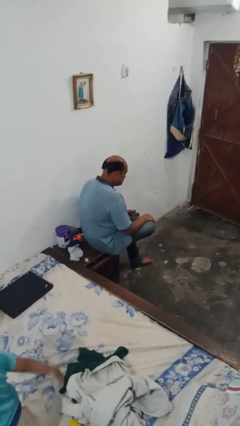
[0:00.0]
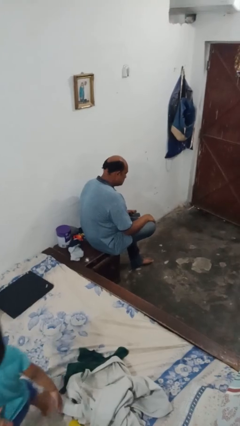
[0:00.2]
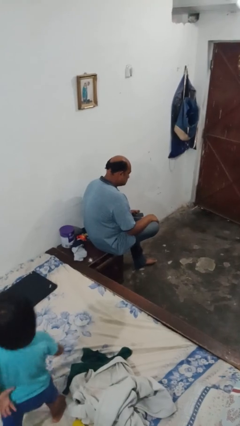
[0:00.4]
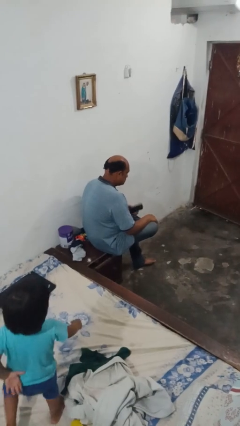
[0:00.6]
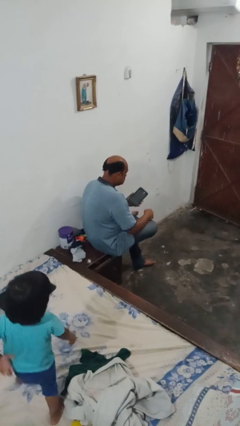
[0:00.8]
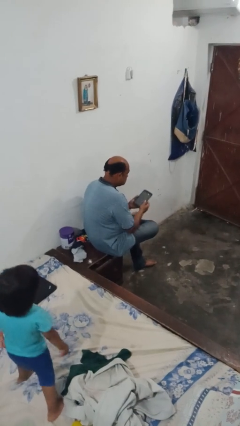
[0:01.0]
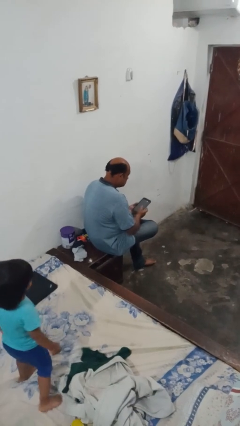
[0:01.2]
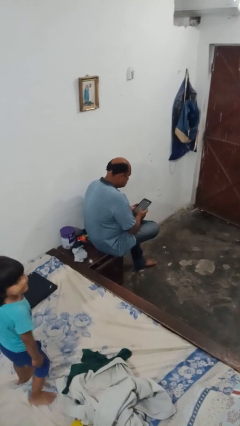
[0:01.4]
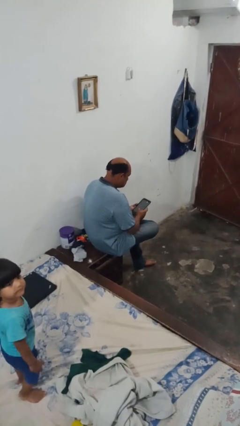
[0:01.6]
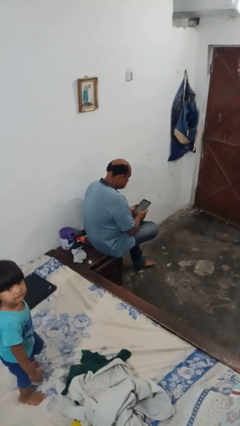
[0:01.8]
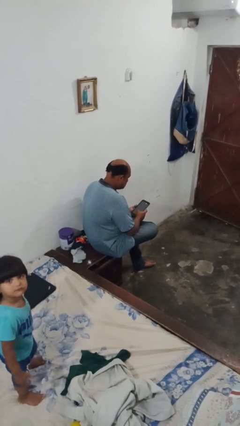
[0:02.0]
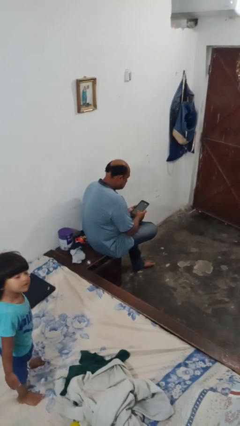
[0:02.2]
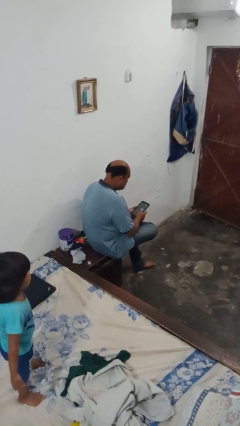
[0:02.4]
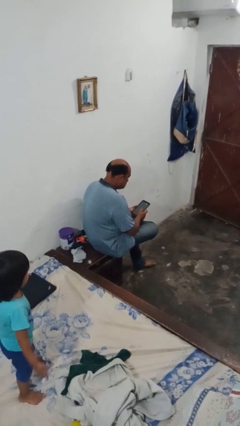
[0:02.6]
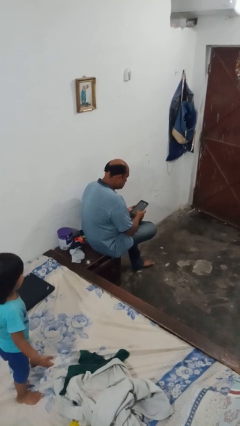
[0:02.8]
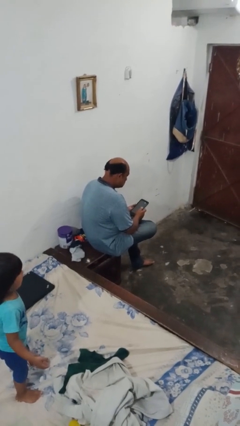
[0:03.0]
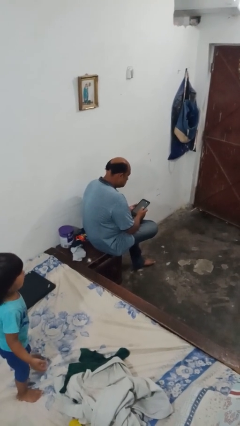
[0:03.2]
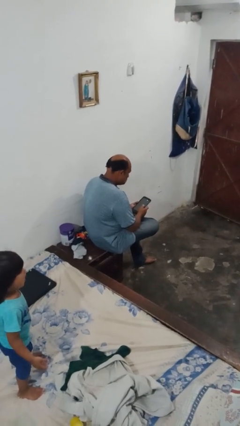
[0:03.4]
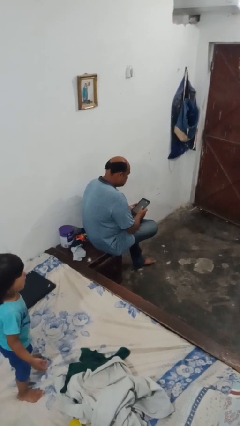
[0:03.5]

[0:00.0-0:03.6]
person interacts with tablet

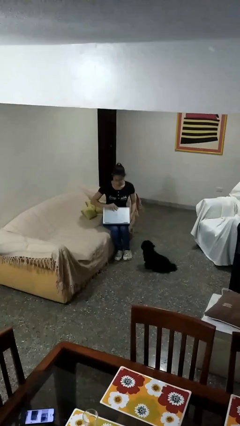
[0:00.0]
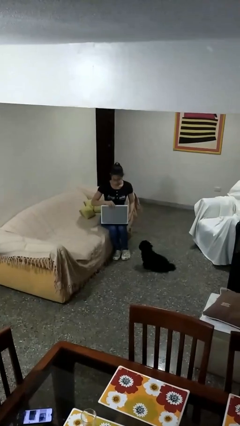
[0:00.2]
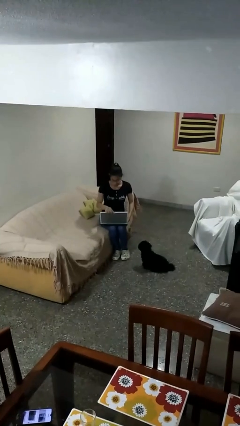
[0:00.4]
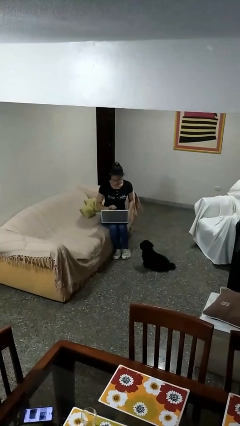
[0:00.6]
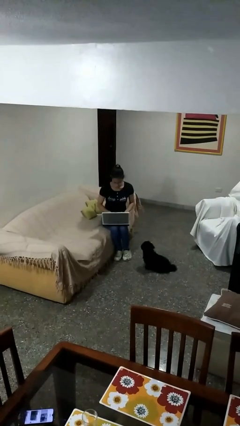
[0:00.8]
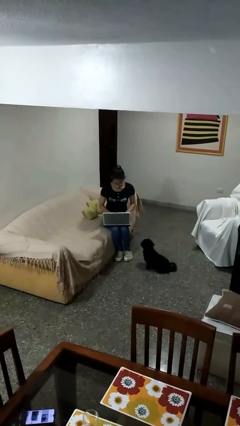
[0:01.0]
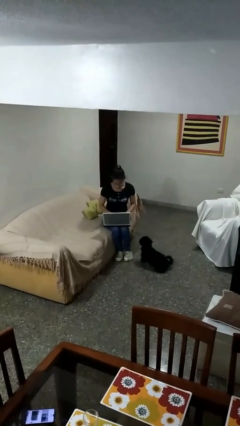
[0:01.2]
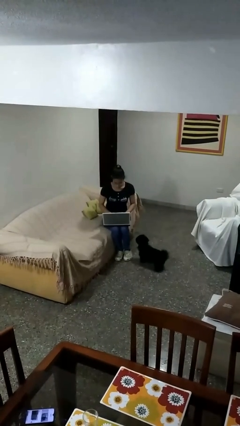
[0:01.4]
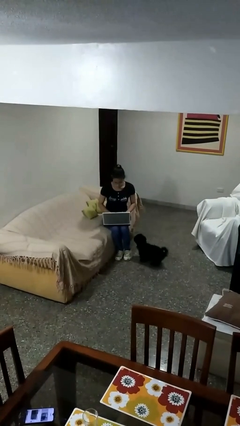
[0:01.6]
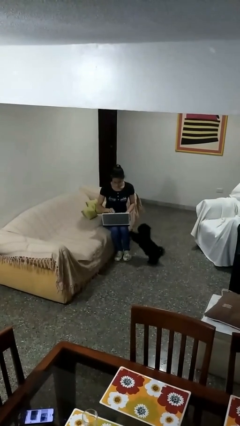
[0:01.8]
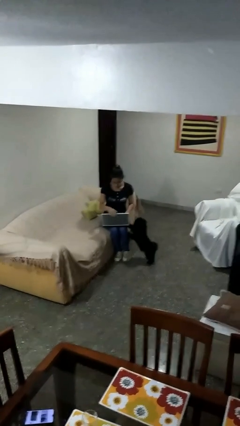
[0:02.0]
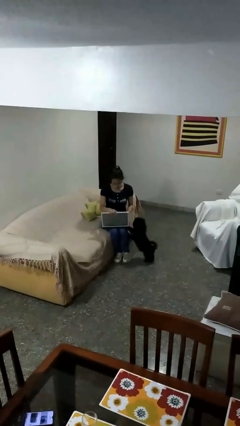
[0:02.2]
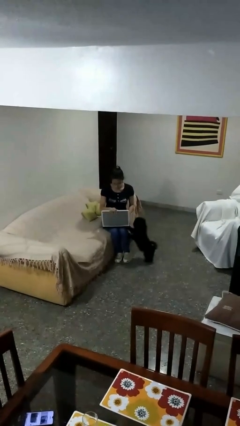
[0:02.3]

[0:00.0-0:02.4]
person interacts with laptop

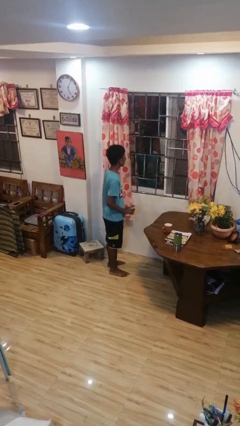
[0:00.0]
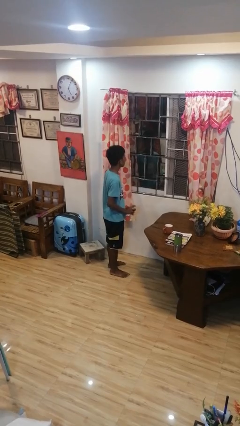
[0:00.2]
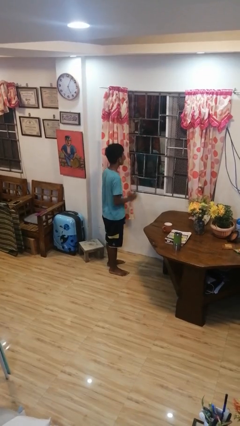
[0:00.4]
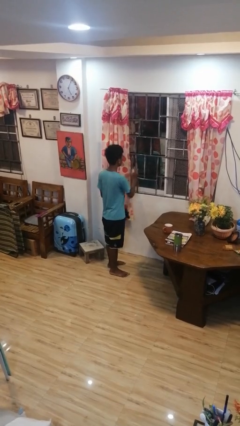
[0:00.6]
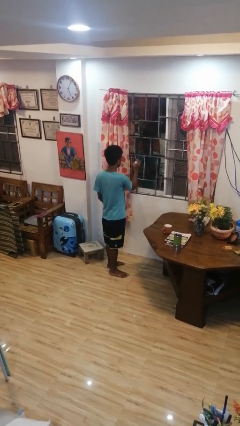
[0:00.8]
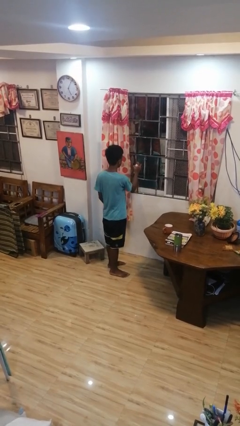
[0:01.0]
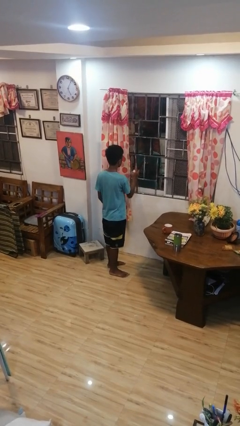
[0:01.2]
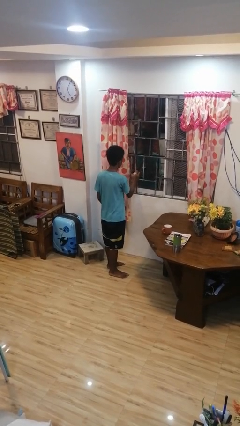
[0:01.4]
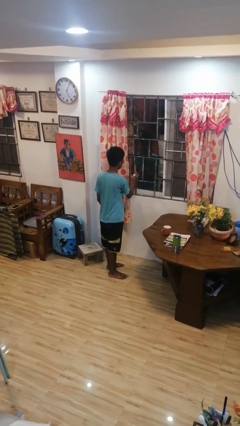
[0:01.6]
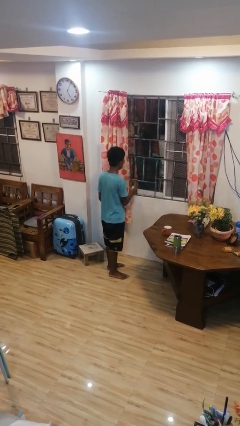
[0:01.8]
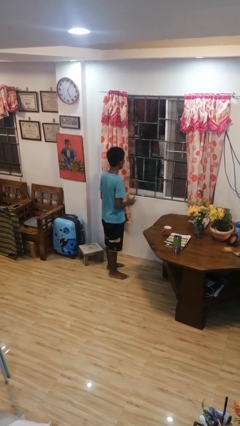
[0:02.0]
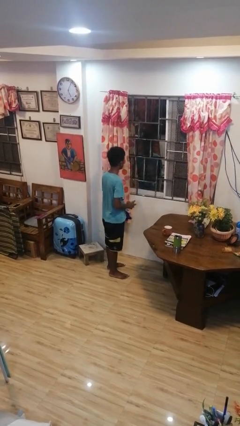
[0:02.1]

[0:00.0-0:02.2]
person sprays from bottle

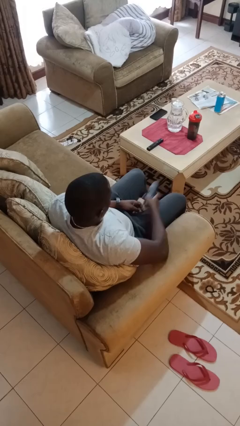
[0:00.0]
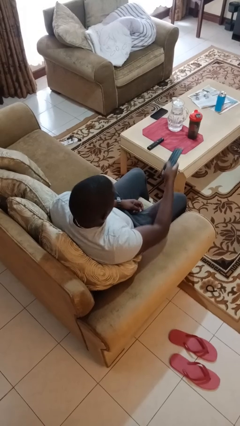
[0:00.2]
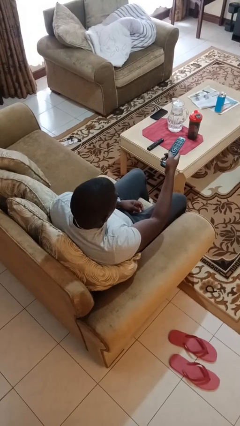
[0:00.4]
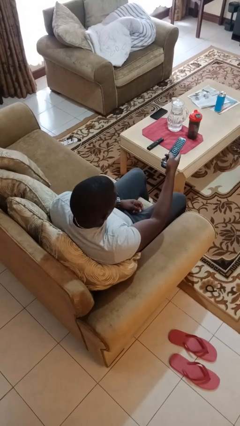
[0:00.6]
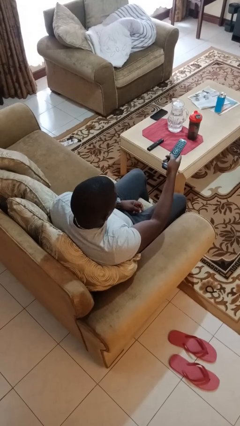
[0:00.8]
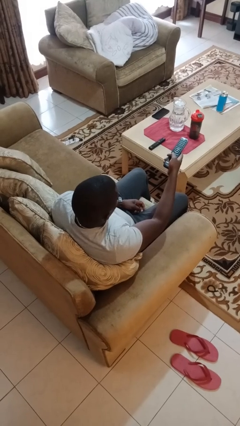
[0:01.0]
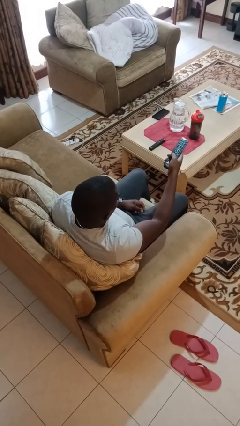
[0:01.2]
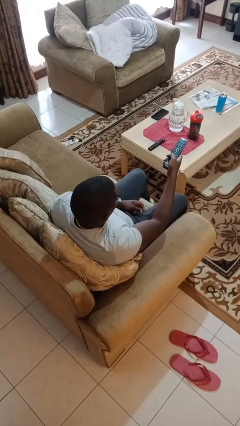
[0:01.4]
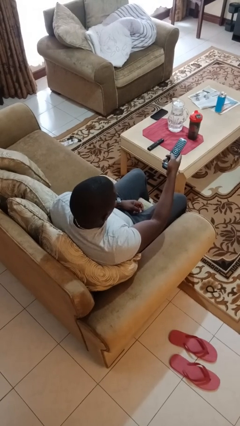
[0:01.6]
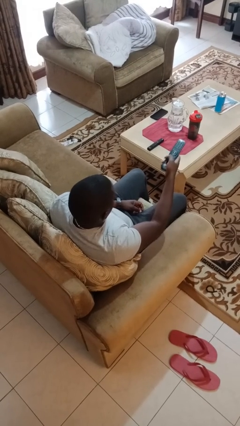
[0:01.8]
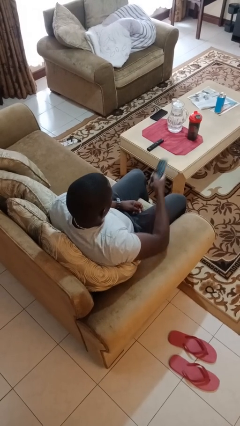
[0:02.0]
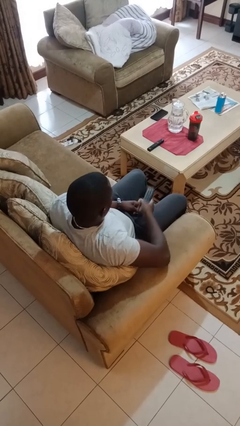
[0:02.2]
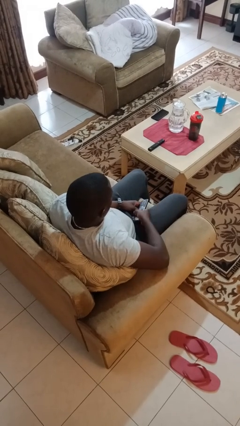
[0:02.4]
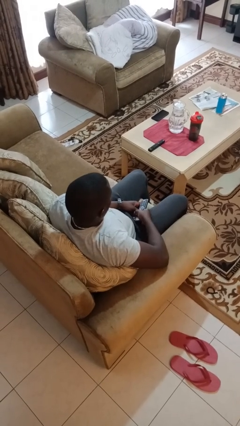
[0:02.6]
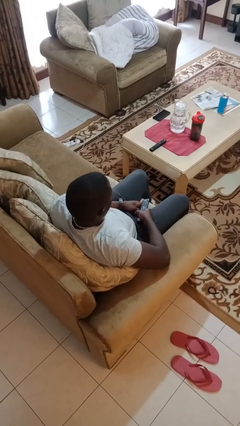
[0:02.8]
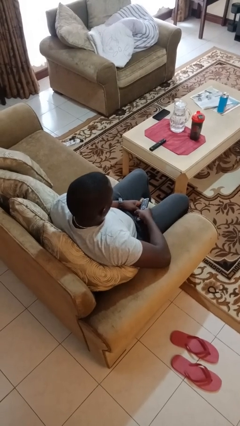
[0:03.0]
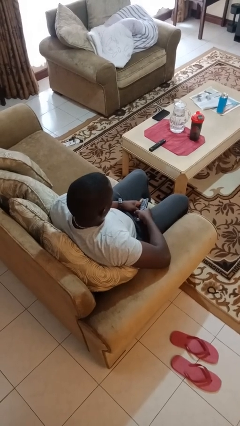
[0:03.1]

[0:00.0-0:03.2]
person uses television remote

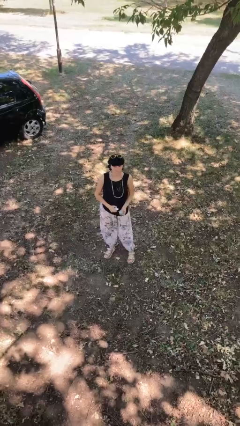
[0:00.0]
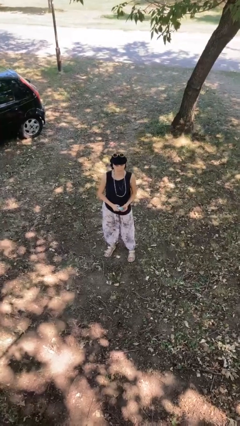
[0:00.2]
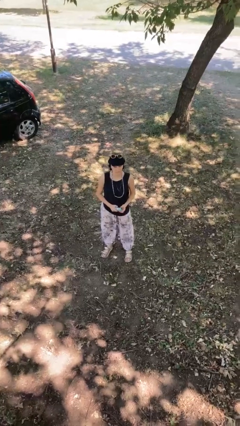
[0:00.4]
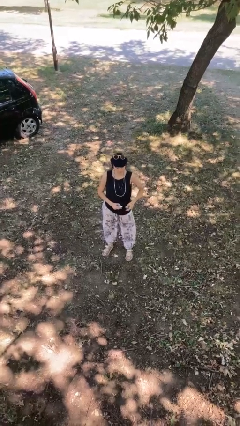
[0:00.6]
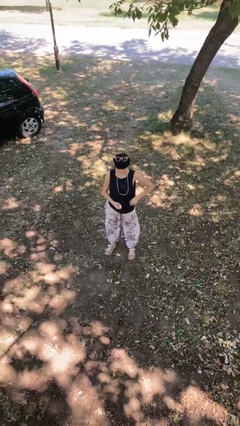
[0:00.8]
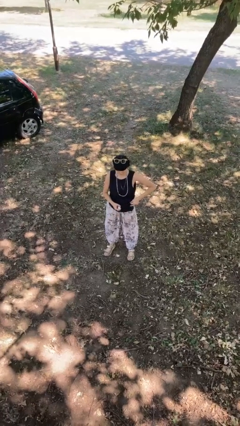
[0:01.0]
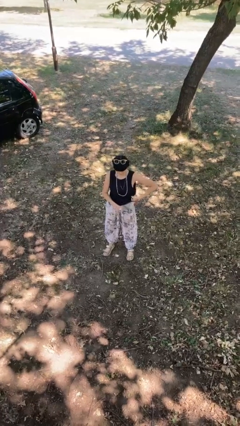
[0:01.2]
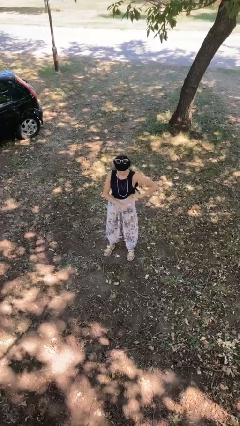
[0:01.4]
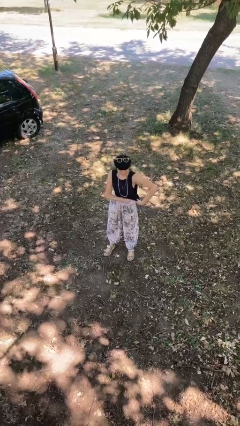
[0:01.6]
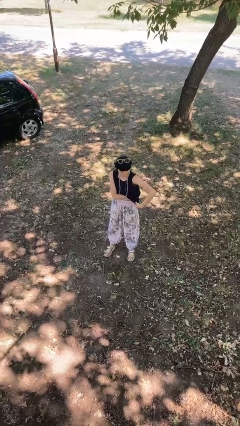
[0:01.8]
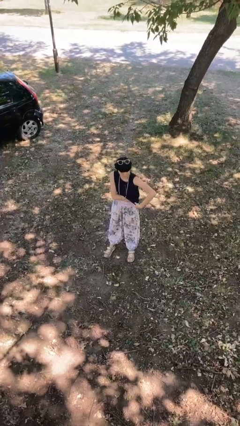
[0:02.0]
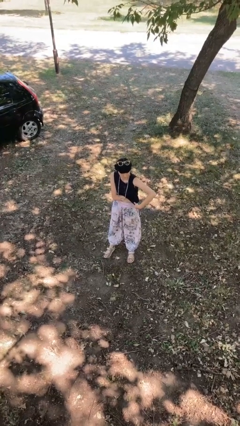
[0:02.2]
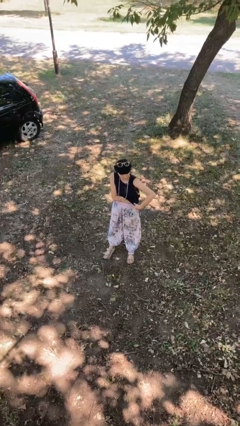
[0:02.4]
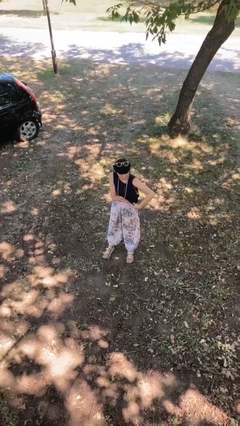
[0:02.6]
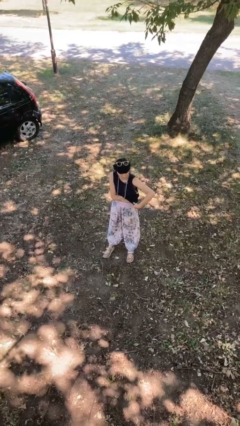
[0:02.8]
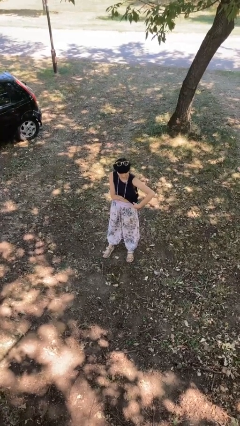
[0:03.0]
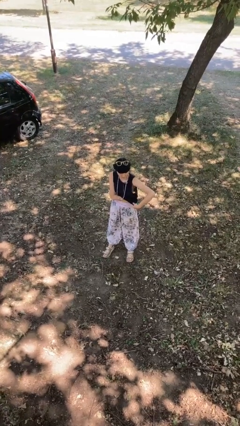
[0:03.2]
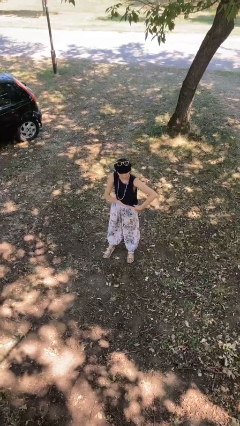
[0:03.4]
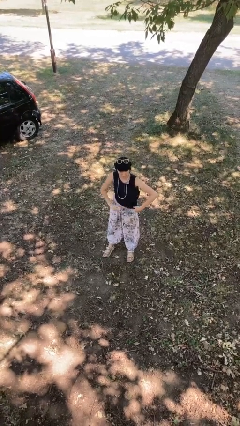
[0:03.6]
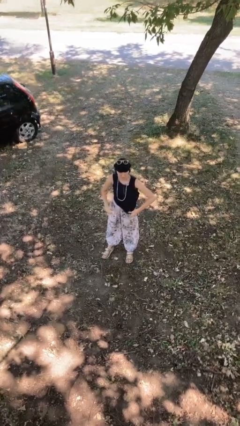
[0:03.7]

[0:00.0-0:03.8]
person applies deodorant

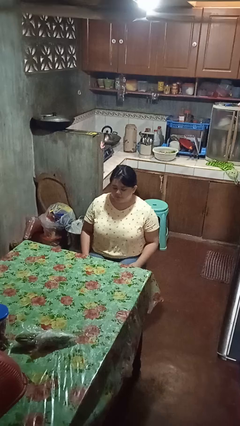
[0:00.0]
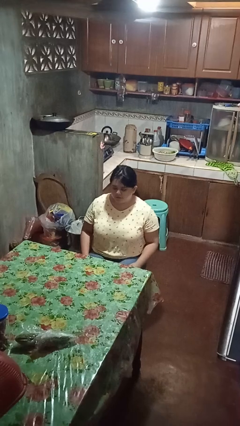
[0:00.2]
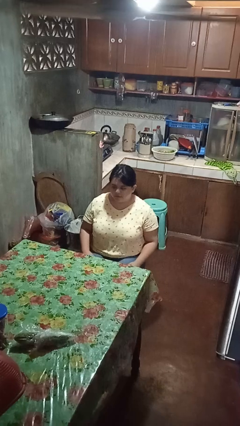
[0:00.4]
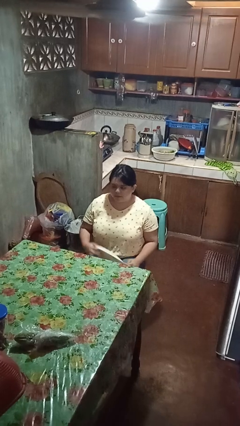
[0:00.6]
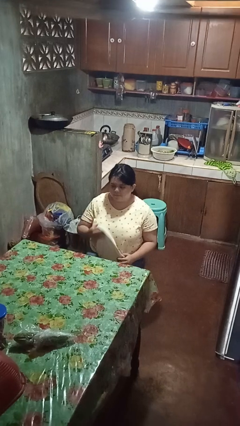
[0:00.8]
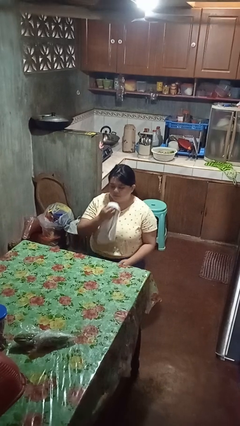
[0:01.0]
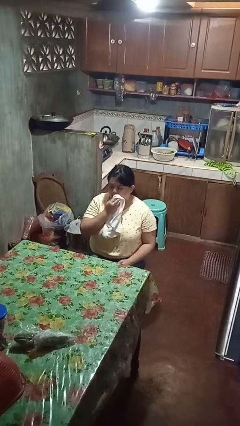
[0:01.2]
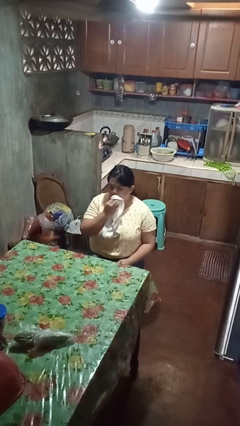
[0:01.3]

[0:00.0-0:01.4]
person wipes mouth with napkin

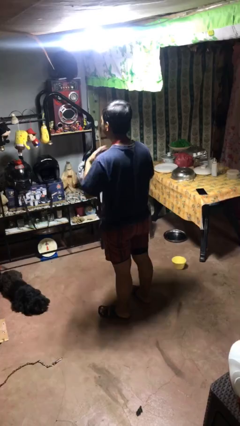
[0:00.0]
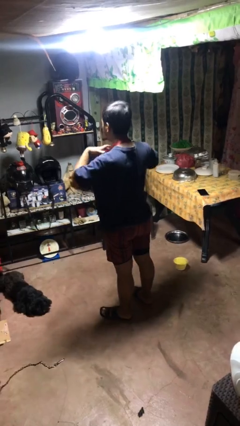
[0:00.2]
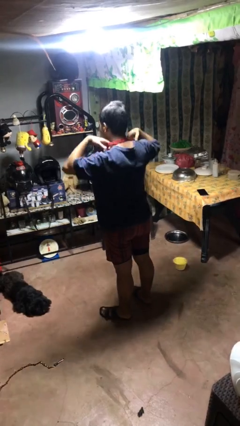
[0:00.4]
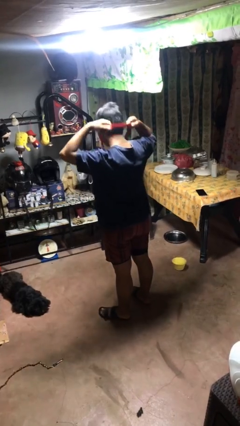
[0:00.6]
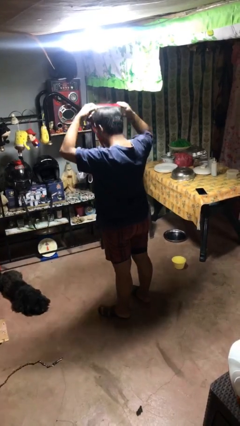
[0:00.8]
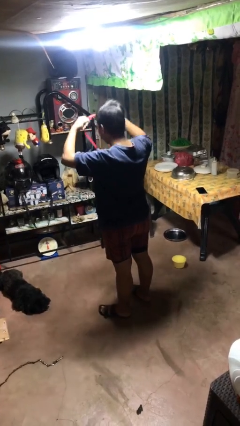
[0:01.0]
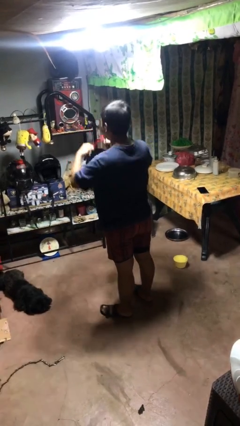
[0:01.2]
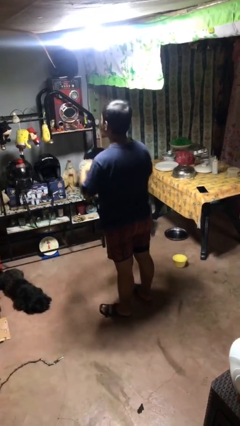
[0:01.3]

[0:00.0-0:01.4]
person takes off necklace
